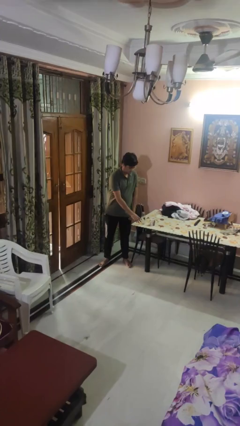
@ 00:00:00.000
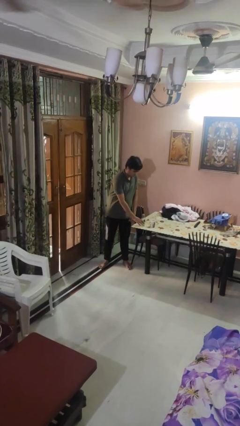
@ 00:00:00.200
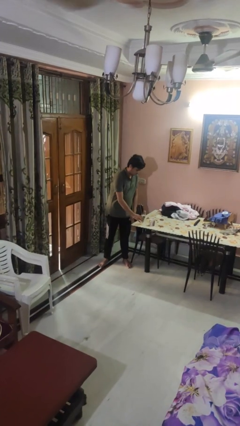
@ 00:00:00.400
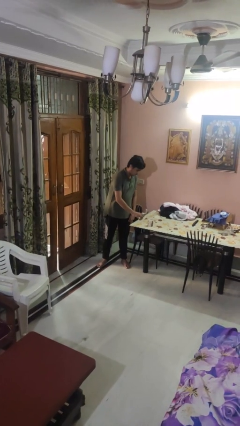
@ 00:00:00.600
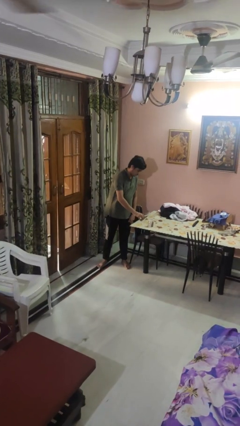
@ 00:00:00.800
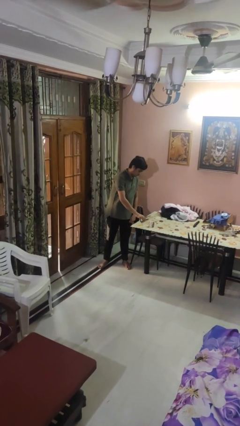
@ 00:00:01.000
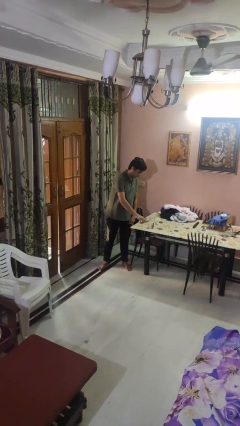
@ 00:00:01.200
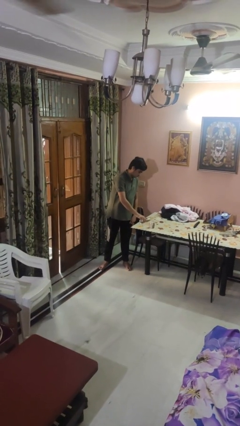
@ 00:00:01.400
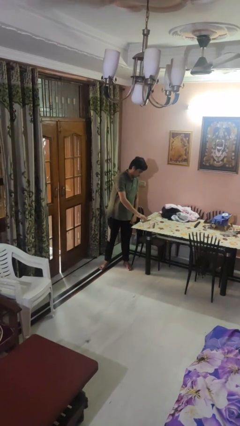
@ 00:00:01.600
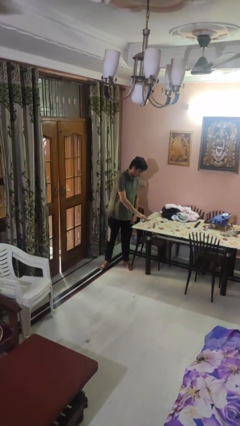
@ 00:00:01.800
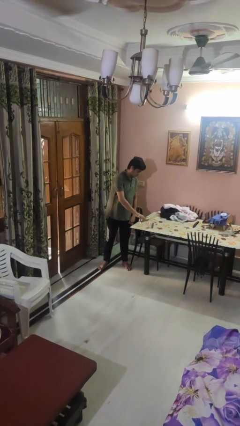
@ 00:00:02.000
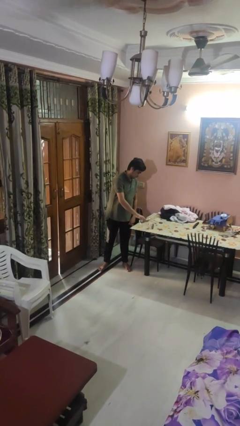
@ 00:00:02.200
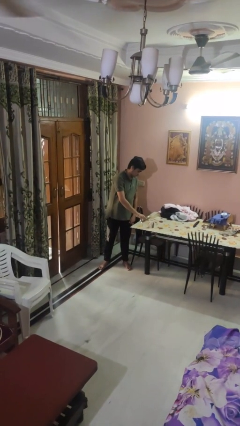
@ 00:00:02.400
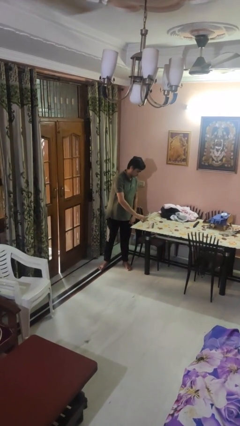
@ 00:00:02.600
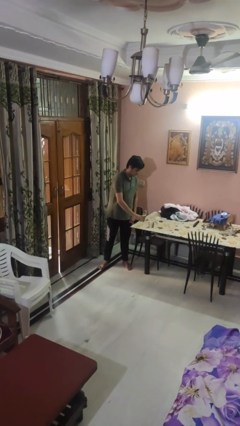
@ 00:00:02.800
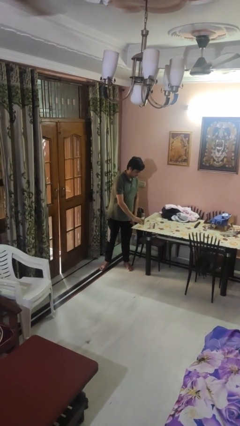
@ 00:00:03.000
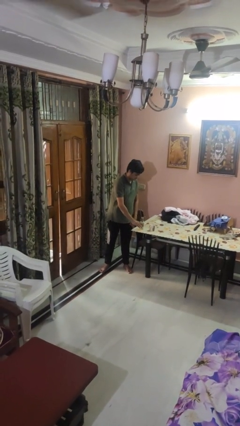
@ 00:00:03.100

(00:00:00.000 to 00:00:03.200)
person pours liquid into cup

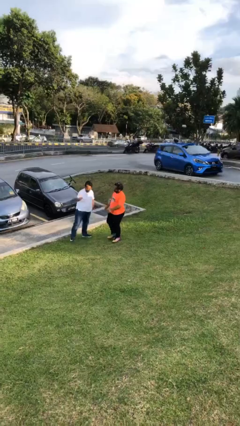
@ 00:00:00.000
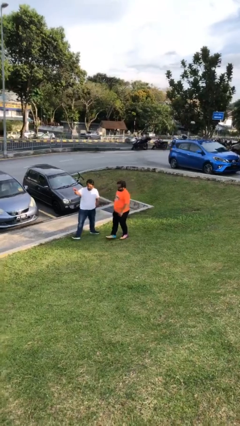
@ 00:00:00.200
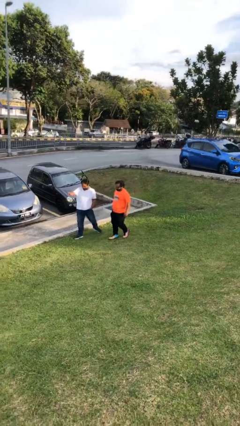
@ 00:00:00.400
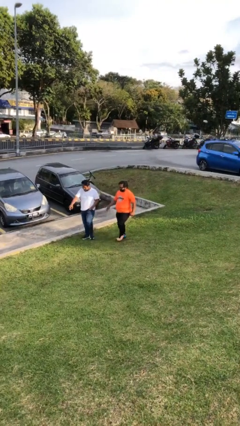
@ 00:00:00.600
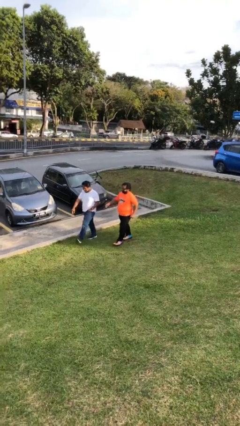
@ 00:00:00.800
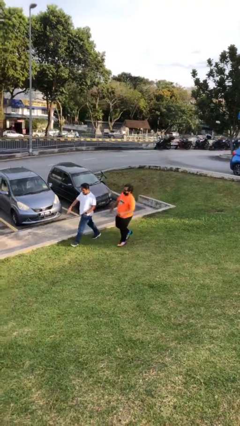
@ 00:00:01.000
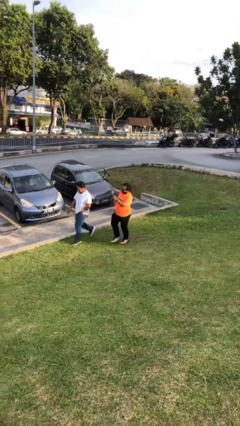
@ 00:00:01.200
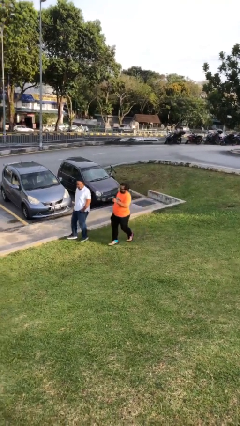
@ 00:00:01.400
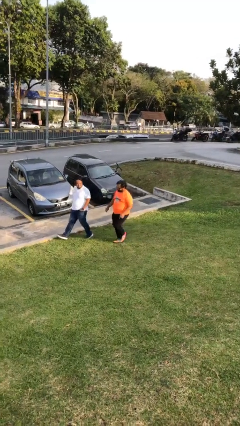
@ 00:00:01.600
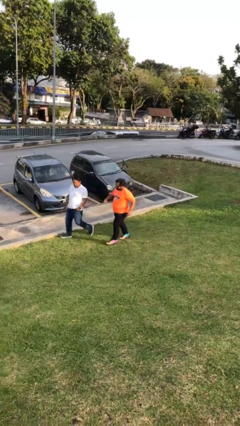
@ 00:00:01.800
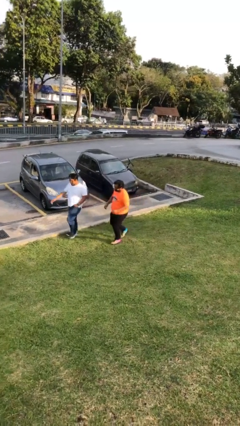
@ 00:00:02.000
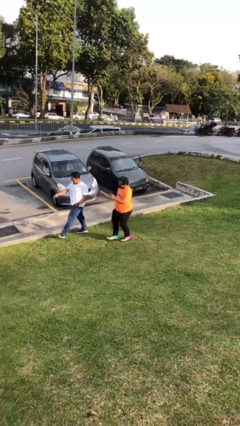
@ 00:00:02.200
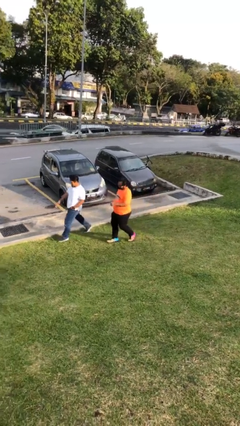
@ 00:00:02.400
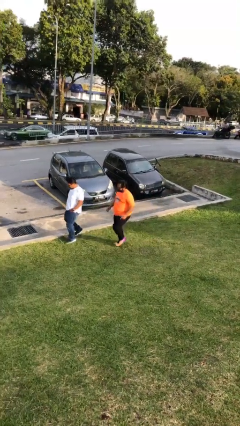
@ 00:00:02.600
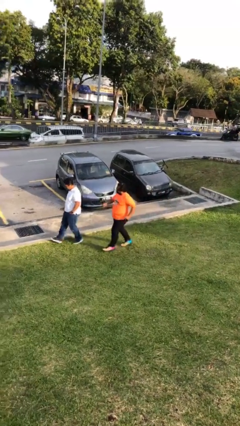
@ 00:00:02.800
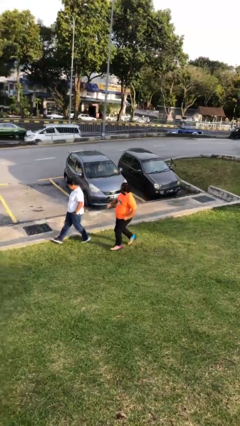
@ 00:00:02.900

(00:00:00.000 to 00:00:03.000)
person talks to person

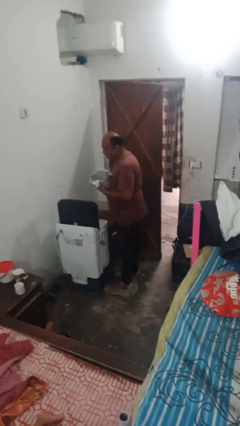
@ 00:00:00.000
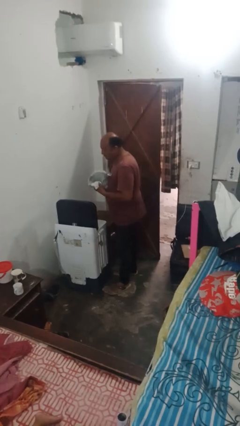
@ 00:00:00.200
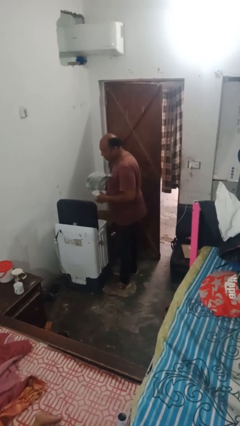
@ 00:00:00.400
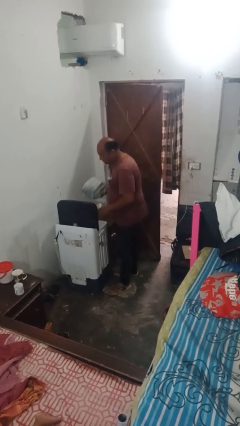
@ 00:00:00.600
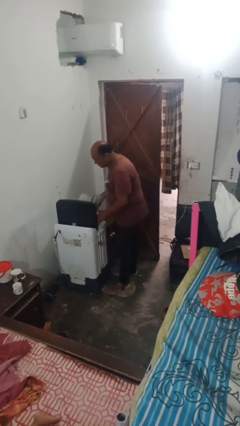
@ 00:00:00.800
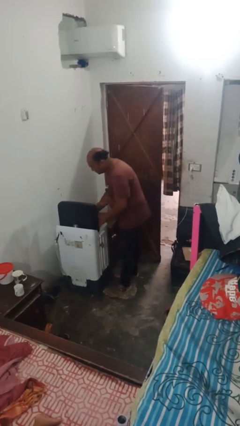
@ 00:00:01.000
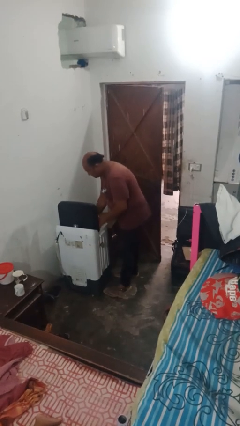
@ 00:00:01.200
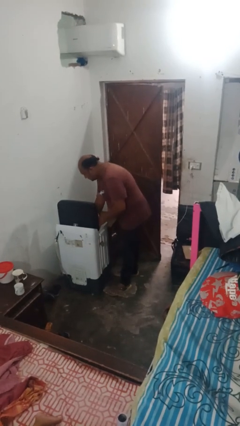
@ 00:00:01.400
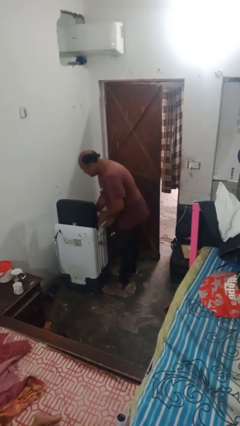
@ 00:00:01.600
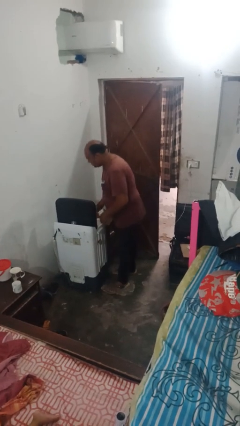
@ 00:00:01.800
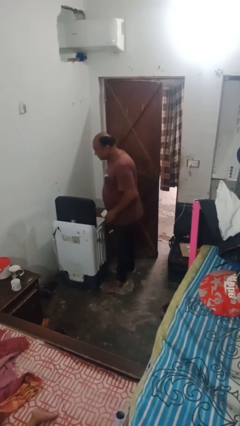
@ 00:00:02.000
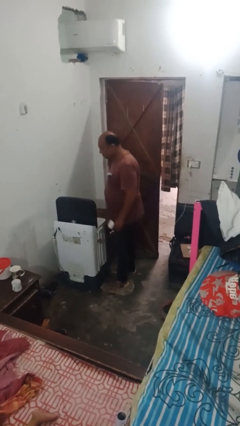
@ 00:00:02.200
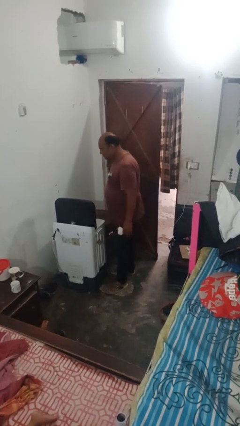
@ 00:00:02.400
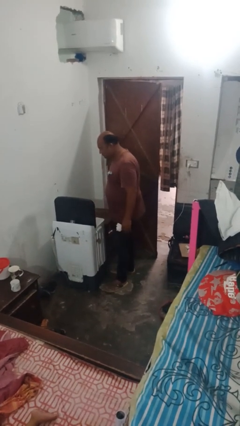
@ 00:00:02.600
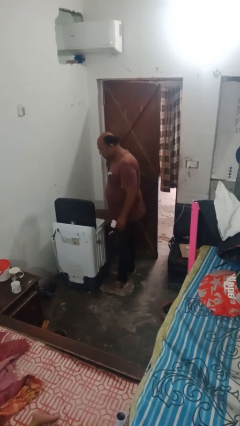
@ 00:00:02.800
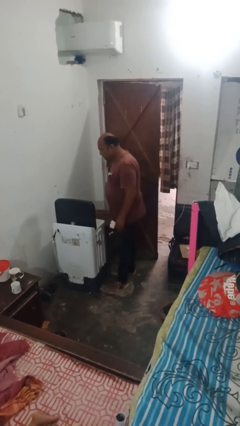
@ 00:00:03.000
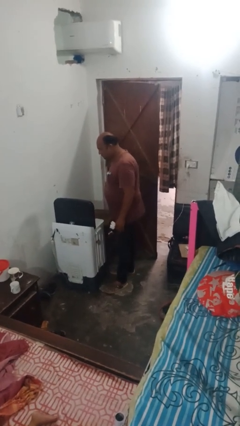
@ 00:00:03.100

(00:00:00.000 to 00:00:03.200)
person loads dryer

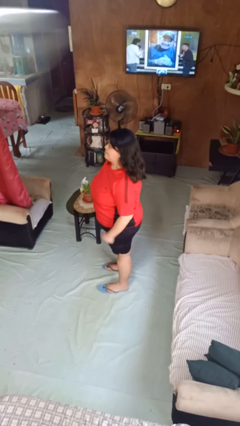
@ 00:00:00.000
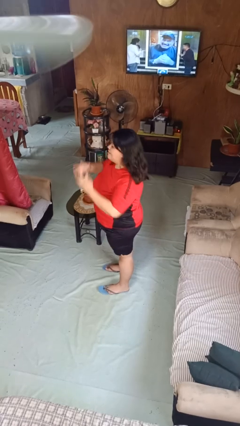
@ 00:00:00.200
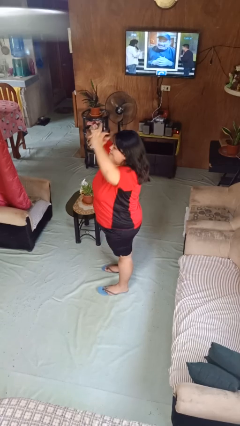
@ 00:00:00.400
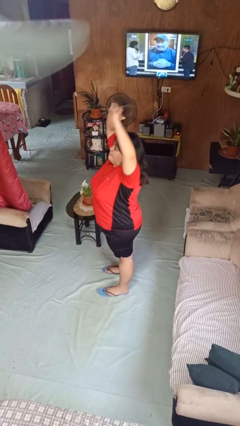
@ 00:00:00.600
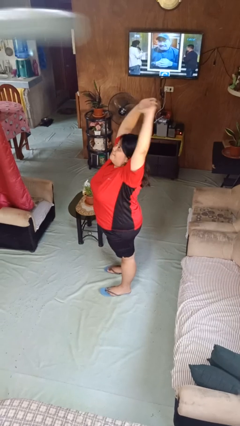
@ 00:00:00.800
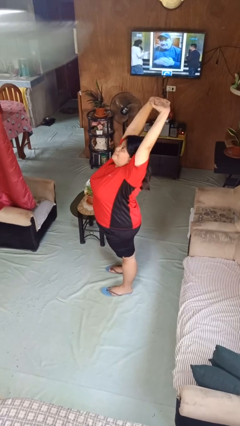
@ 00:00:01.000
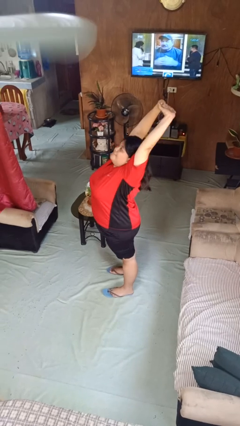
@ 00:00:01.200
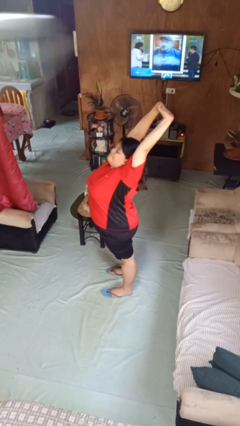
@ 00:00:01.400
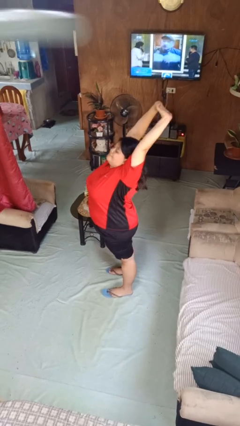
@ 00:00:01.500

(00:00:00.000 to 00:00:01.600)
person stretches arms over head

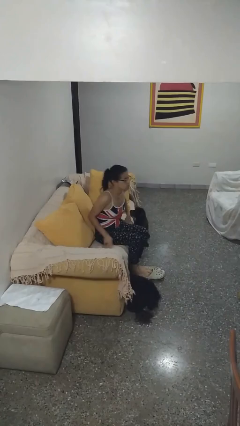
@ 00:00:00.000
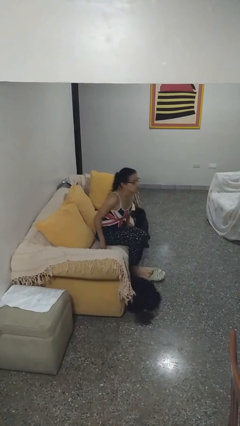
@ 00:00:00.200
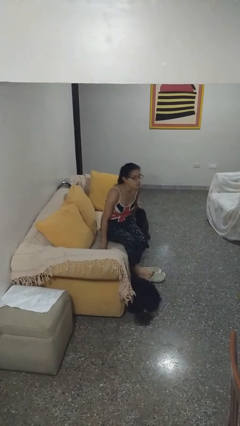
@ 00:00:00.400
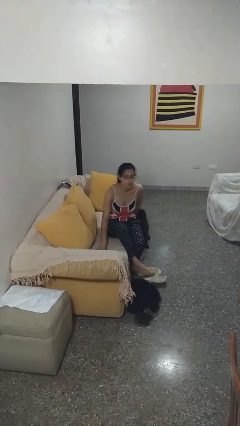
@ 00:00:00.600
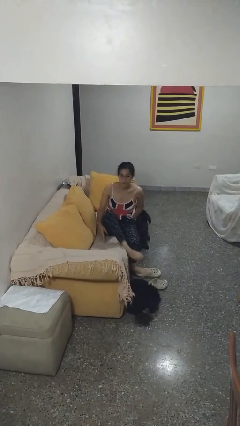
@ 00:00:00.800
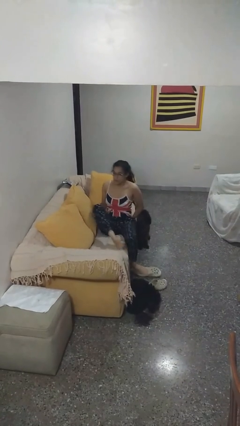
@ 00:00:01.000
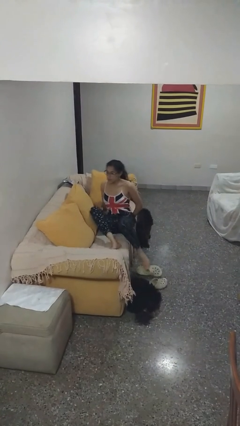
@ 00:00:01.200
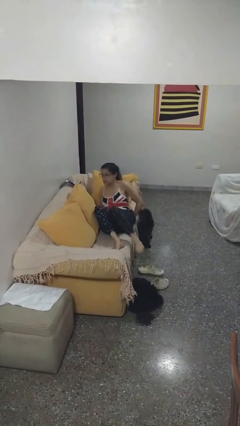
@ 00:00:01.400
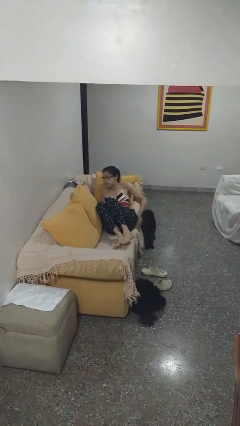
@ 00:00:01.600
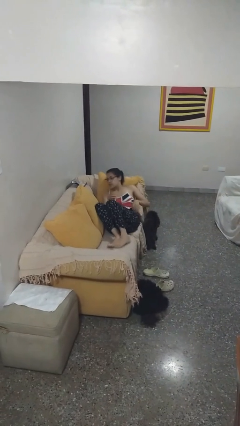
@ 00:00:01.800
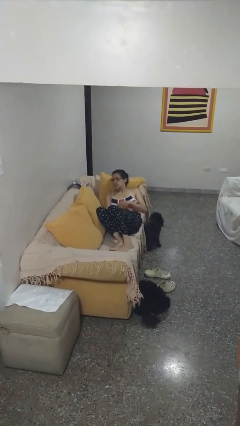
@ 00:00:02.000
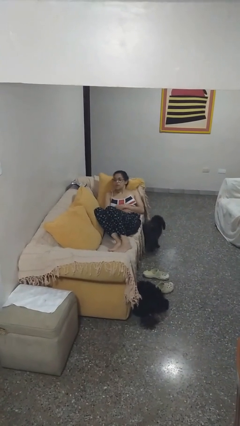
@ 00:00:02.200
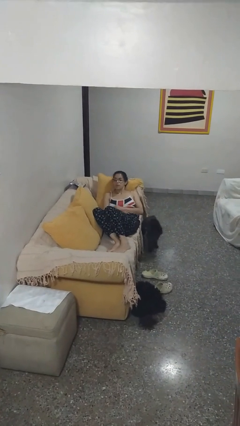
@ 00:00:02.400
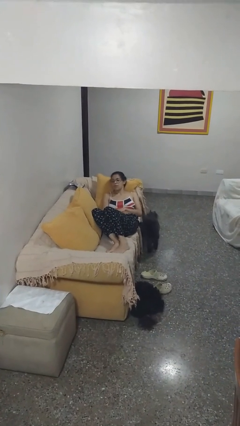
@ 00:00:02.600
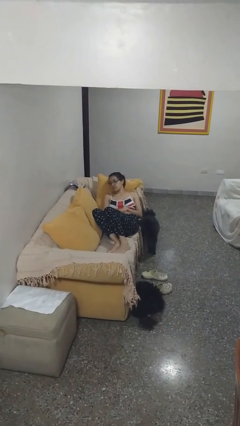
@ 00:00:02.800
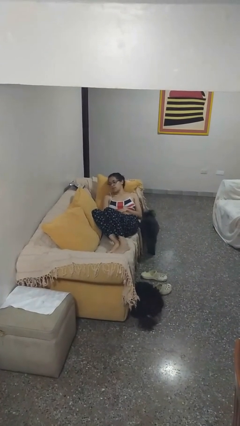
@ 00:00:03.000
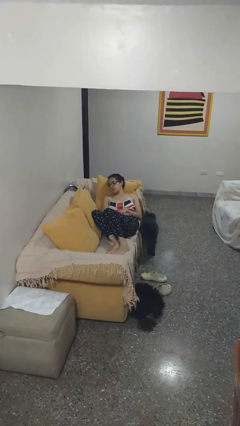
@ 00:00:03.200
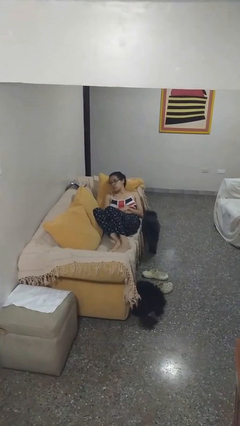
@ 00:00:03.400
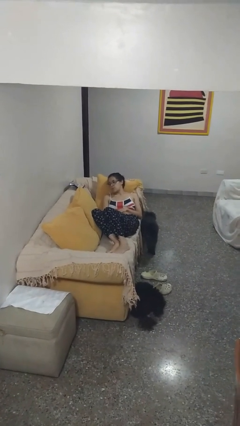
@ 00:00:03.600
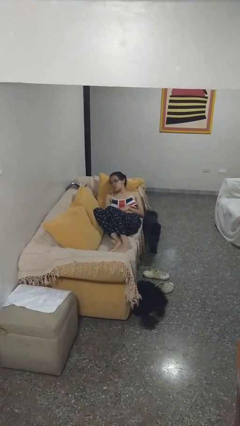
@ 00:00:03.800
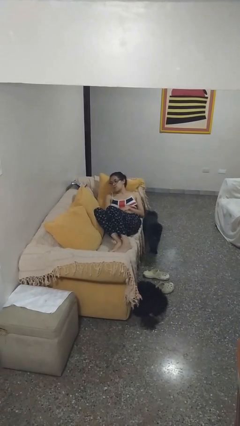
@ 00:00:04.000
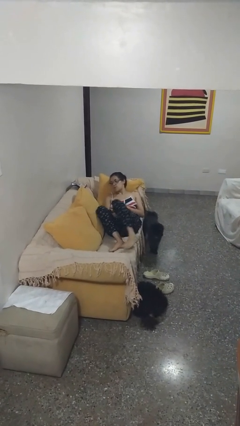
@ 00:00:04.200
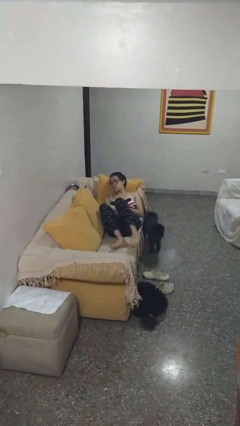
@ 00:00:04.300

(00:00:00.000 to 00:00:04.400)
person lies down on couch

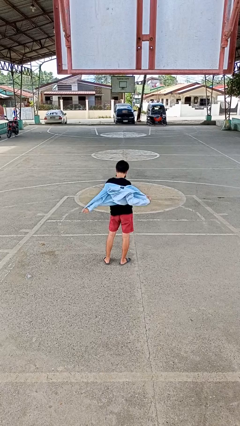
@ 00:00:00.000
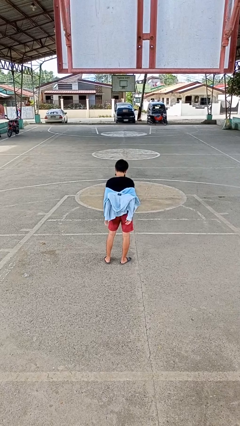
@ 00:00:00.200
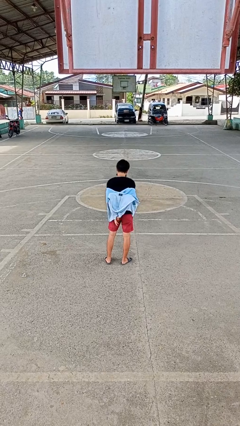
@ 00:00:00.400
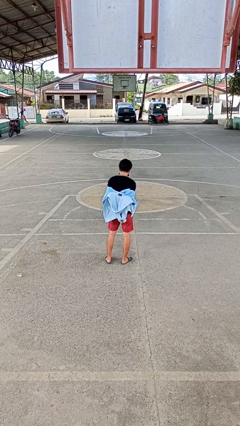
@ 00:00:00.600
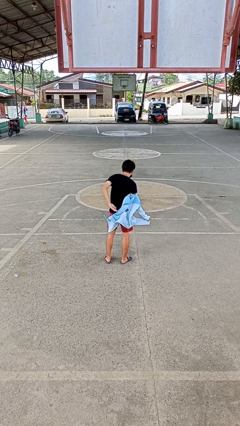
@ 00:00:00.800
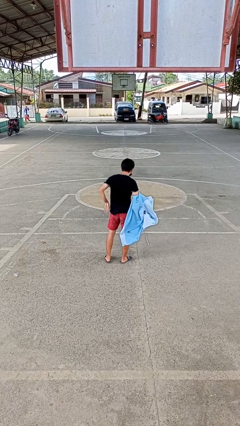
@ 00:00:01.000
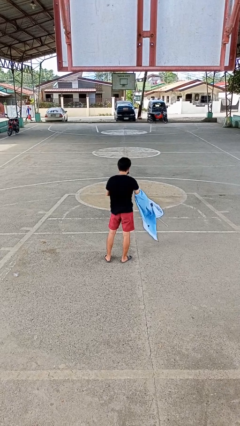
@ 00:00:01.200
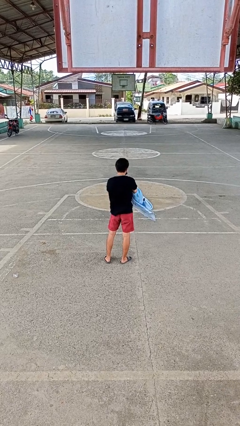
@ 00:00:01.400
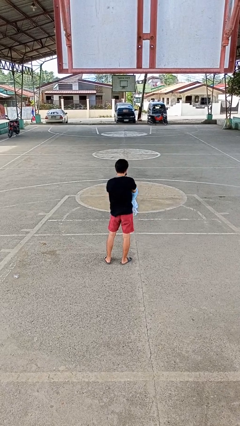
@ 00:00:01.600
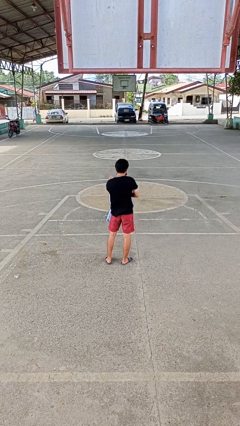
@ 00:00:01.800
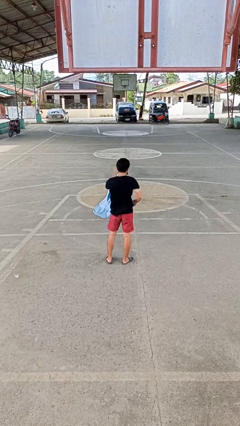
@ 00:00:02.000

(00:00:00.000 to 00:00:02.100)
person takes off jacket
